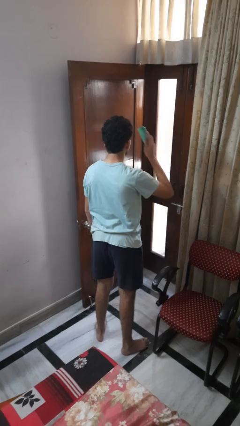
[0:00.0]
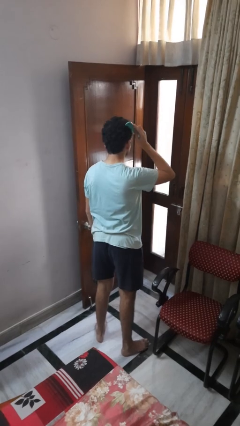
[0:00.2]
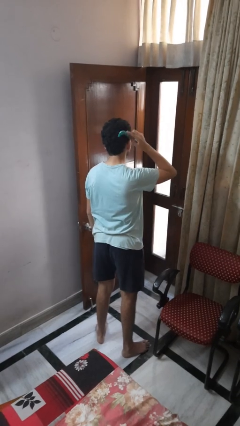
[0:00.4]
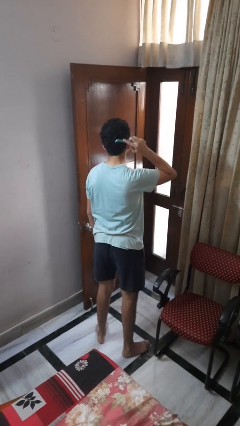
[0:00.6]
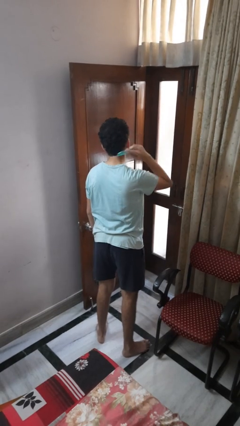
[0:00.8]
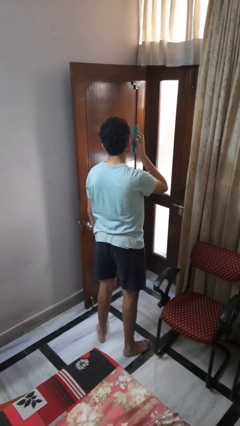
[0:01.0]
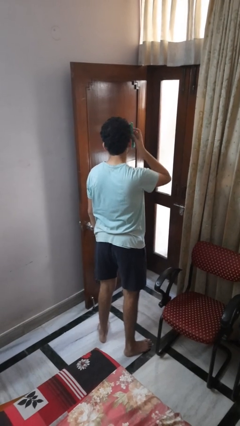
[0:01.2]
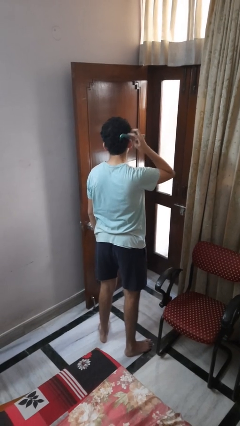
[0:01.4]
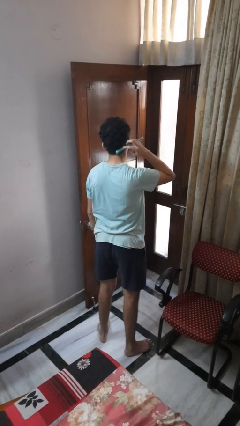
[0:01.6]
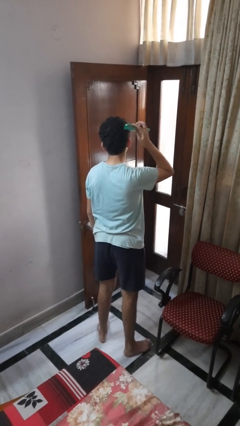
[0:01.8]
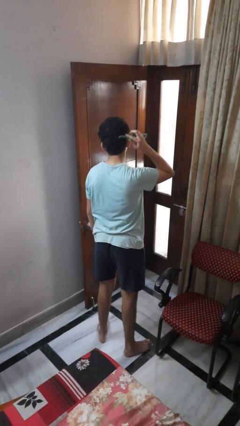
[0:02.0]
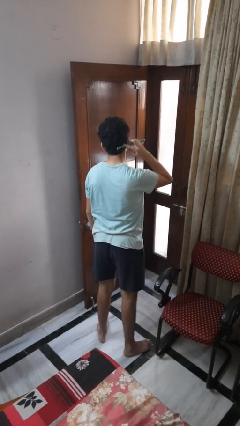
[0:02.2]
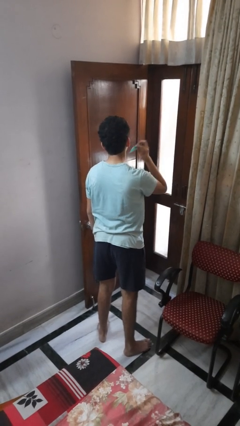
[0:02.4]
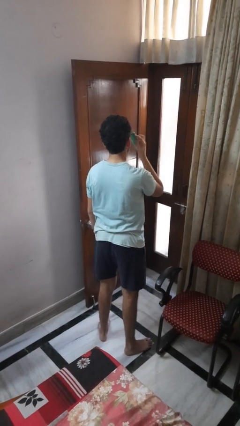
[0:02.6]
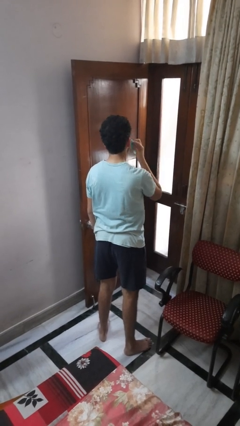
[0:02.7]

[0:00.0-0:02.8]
person brushes hair

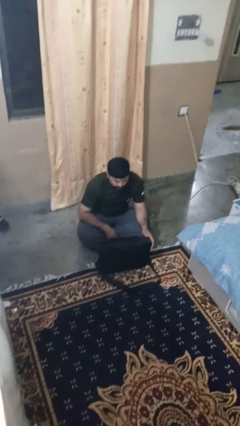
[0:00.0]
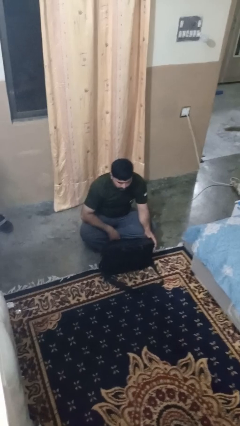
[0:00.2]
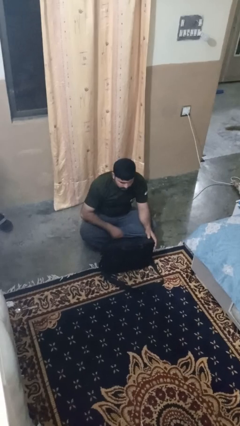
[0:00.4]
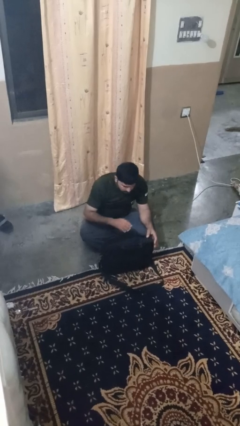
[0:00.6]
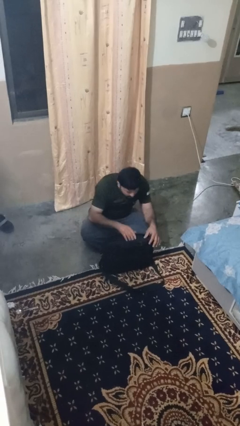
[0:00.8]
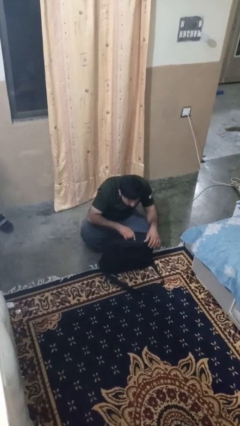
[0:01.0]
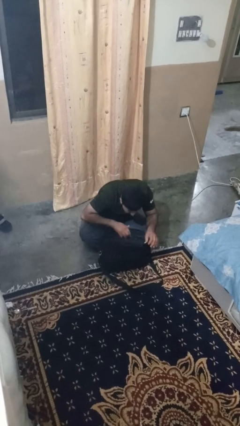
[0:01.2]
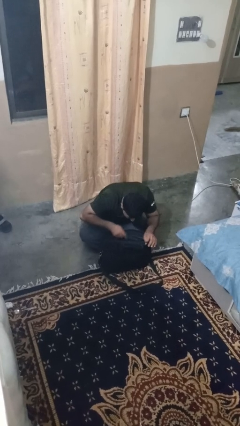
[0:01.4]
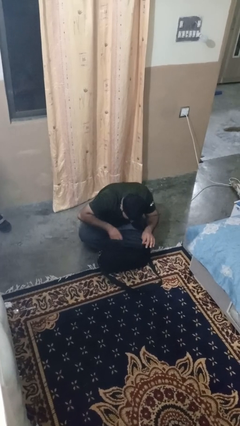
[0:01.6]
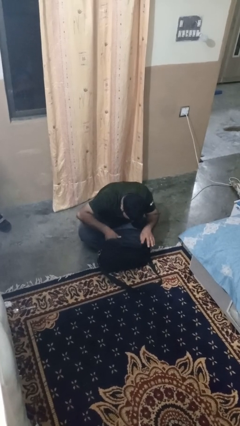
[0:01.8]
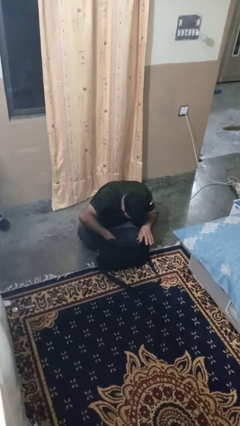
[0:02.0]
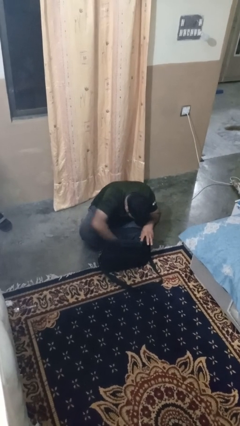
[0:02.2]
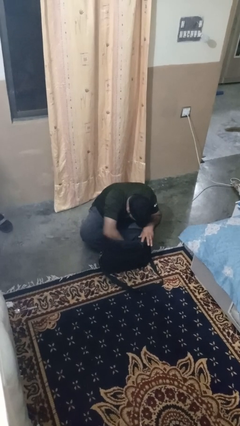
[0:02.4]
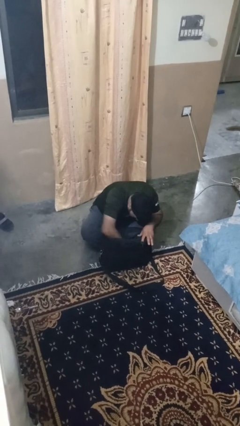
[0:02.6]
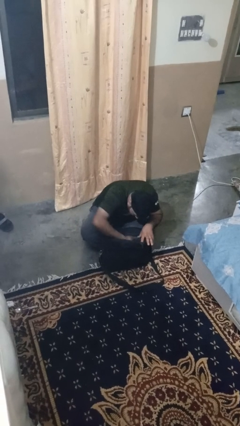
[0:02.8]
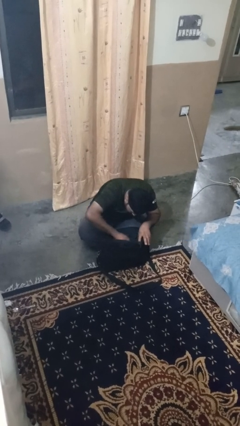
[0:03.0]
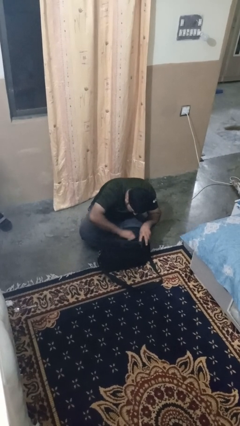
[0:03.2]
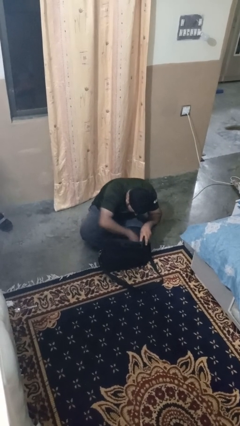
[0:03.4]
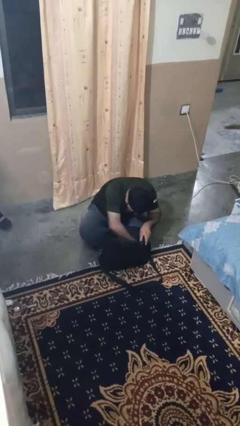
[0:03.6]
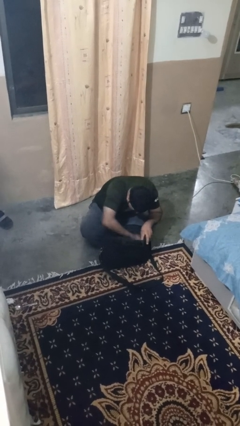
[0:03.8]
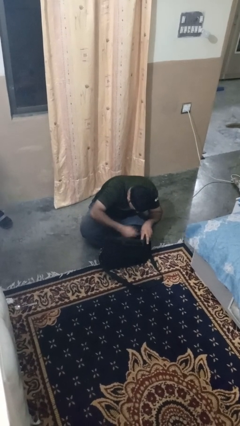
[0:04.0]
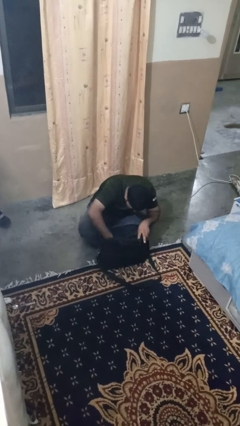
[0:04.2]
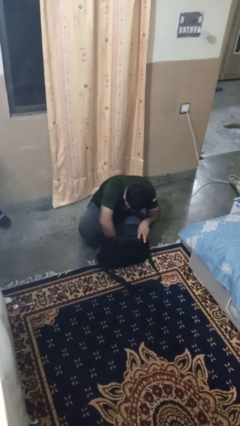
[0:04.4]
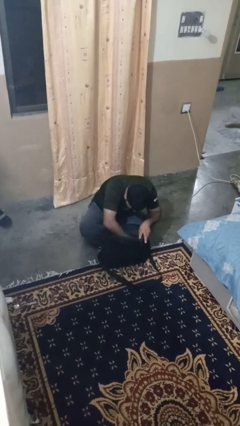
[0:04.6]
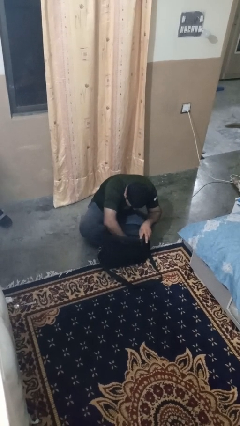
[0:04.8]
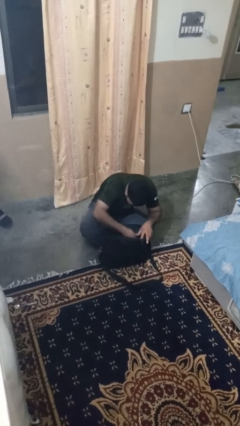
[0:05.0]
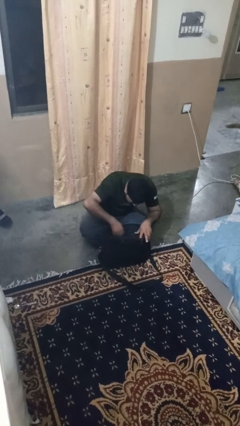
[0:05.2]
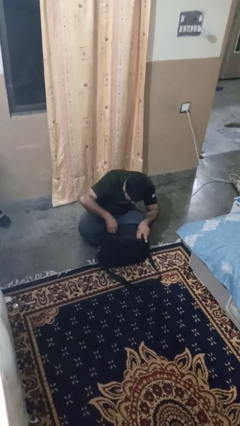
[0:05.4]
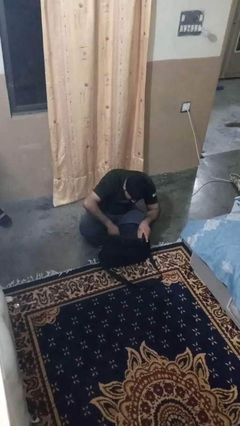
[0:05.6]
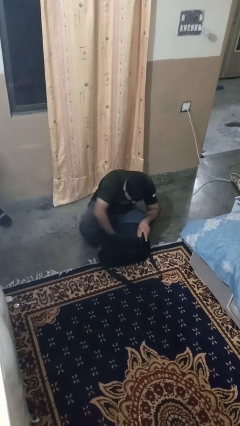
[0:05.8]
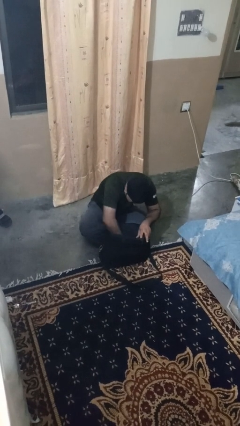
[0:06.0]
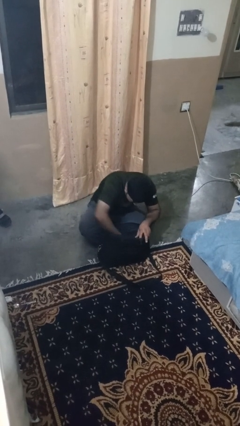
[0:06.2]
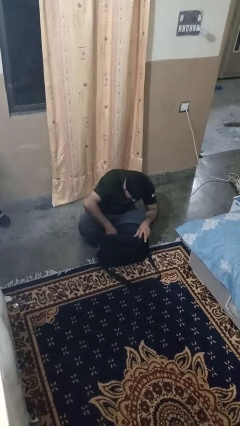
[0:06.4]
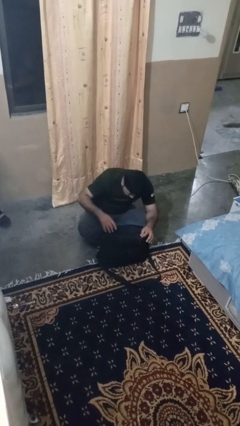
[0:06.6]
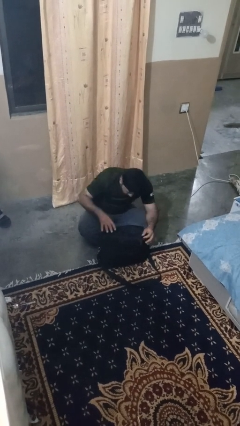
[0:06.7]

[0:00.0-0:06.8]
person searches in bag

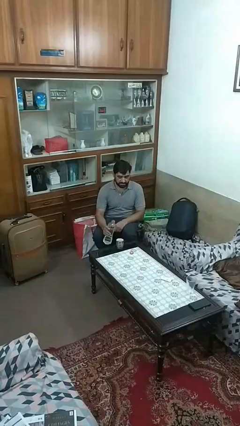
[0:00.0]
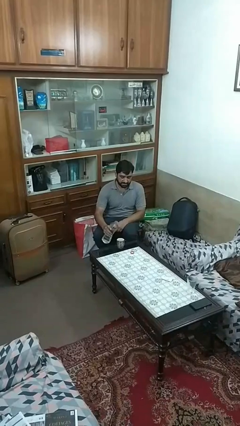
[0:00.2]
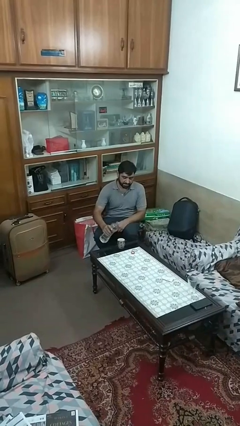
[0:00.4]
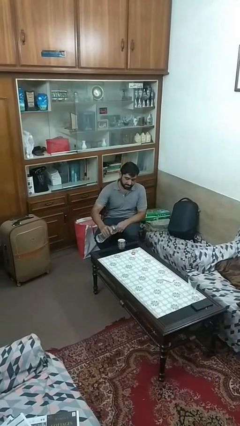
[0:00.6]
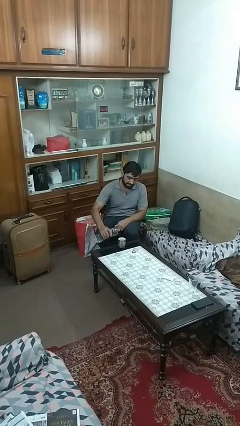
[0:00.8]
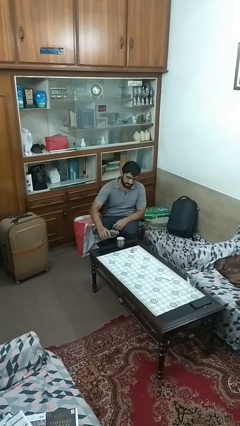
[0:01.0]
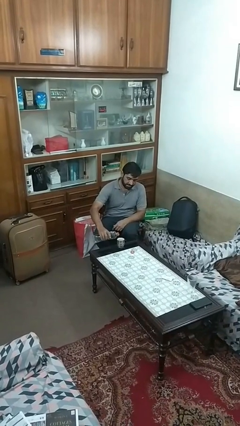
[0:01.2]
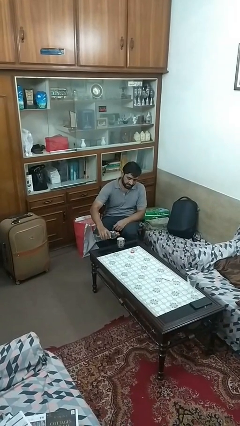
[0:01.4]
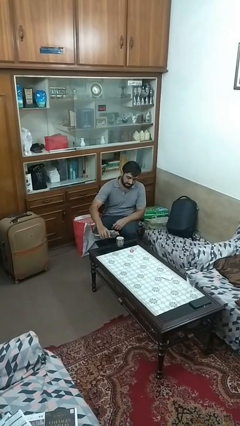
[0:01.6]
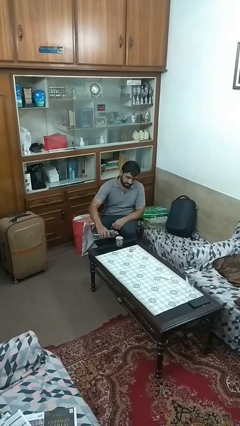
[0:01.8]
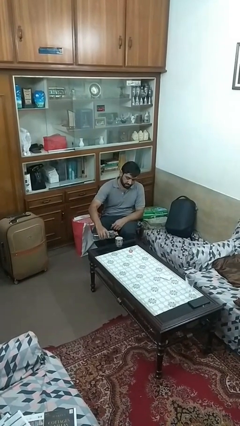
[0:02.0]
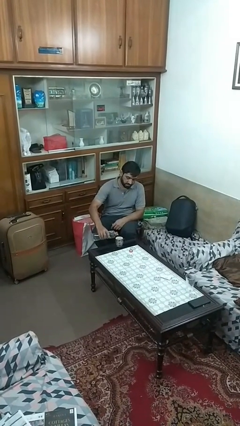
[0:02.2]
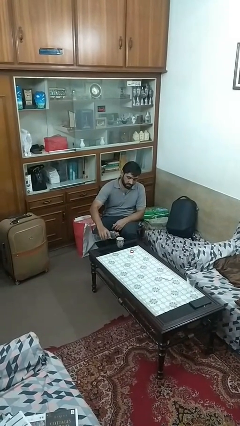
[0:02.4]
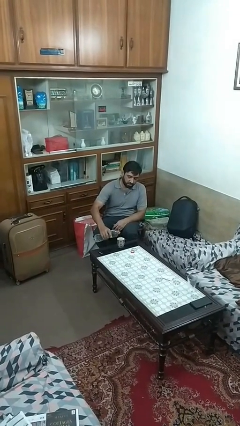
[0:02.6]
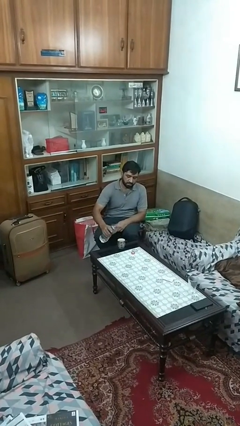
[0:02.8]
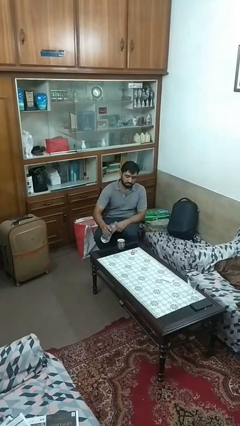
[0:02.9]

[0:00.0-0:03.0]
person pours liquid into cup

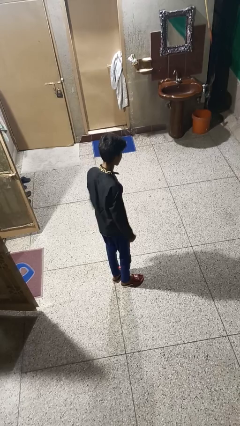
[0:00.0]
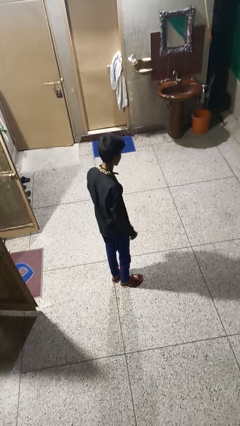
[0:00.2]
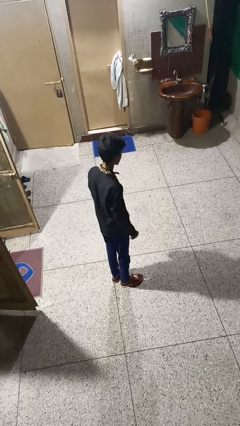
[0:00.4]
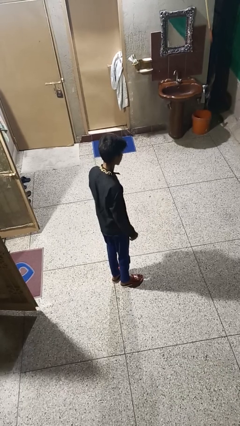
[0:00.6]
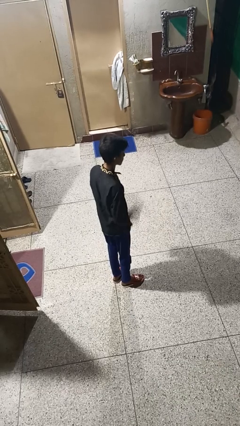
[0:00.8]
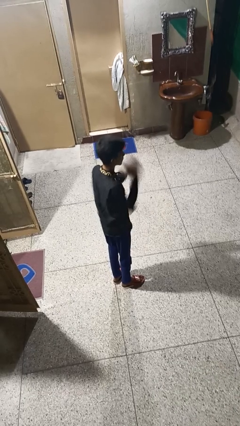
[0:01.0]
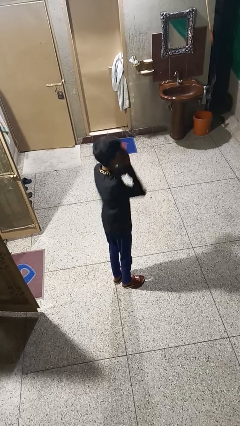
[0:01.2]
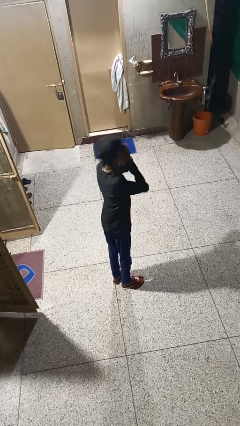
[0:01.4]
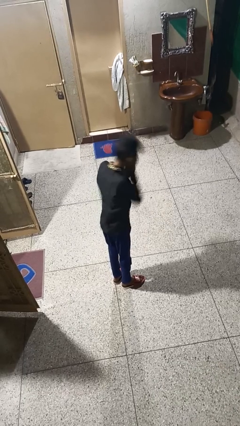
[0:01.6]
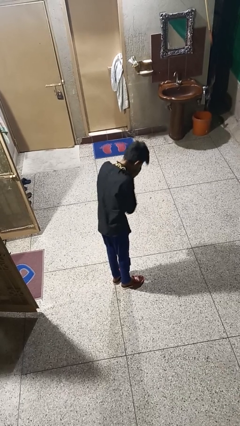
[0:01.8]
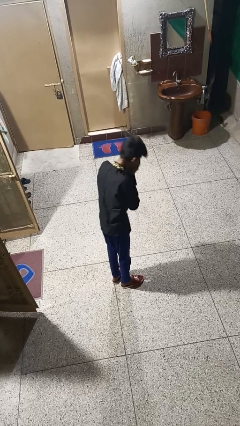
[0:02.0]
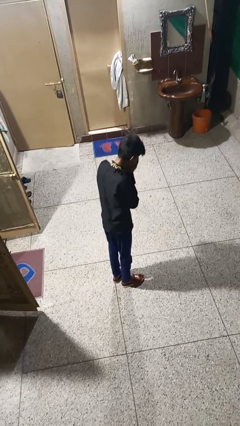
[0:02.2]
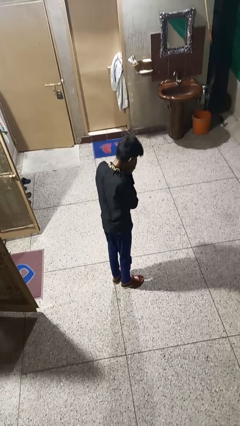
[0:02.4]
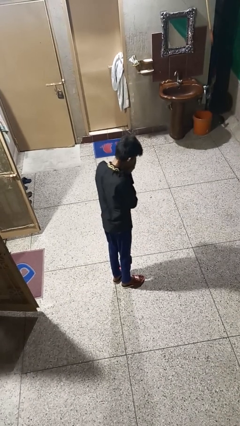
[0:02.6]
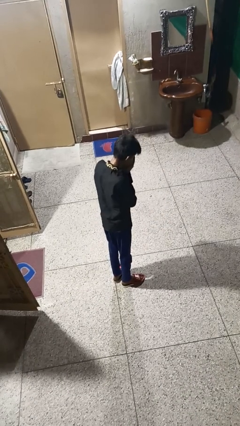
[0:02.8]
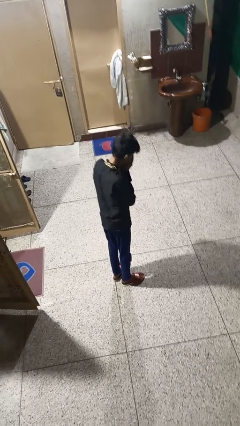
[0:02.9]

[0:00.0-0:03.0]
person sneezes into hand

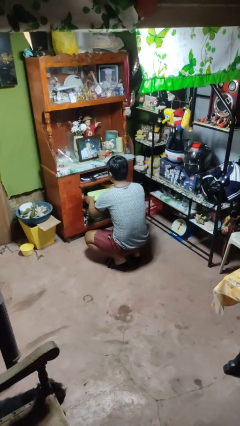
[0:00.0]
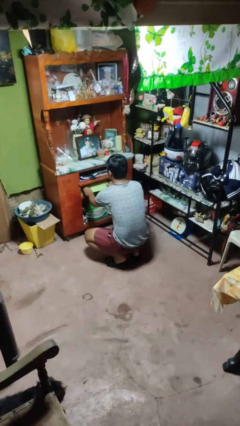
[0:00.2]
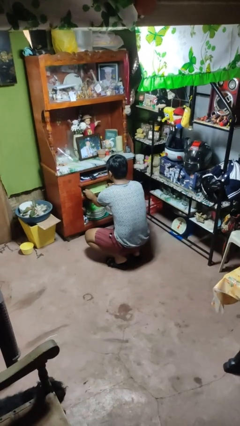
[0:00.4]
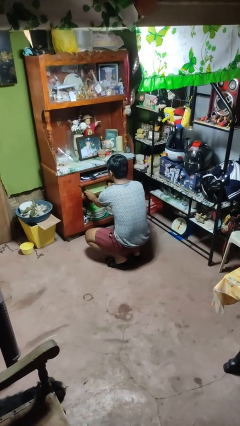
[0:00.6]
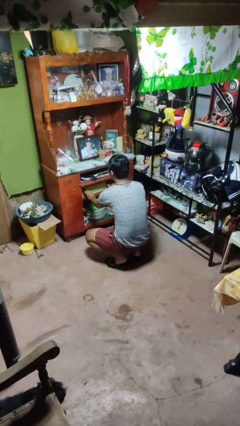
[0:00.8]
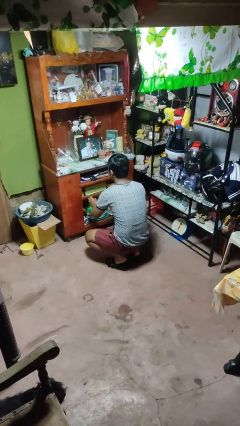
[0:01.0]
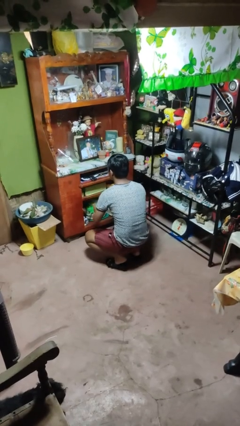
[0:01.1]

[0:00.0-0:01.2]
person puts down object into cabinet

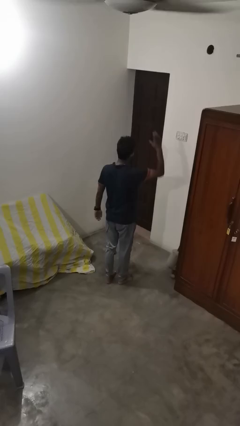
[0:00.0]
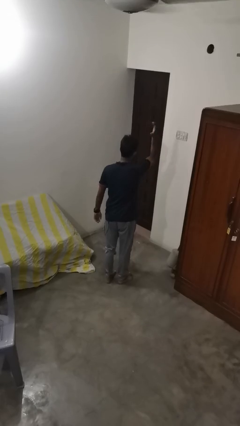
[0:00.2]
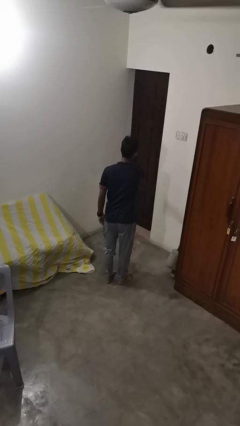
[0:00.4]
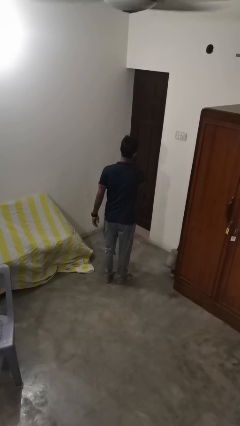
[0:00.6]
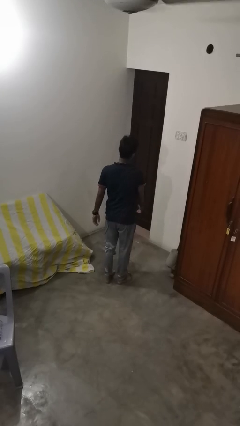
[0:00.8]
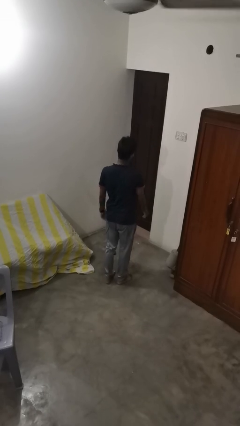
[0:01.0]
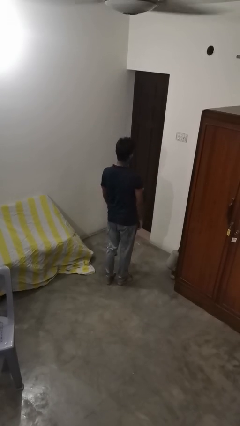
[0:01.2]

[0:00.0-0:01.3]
person karate chop
